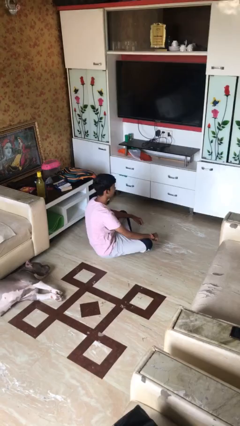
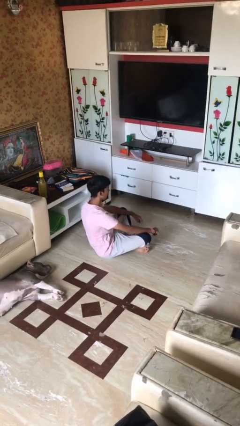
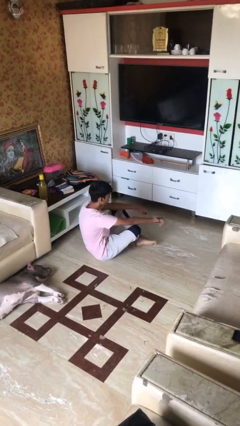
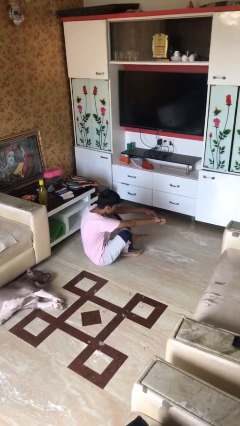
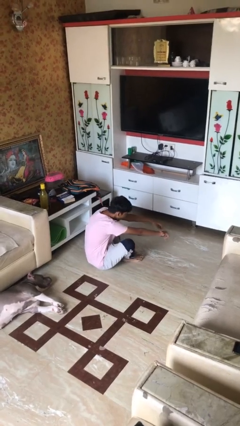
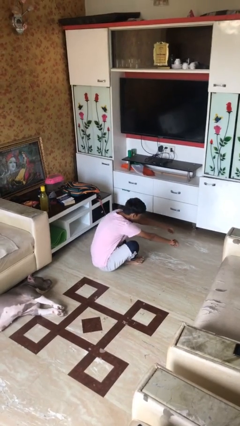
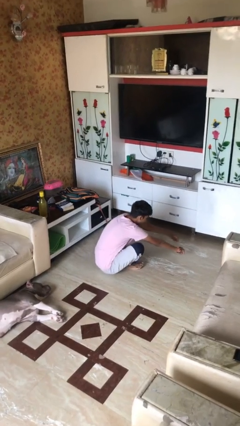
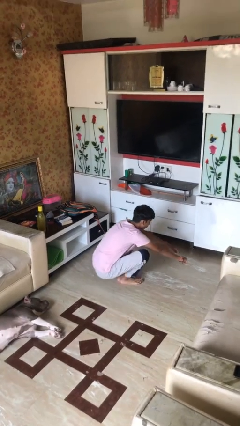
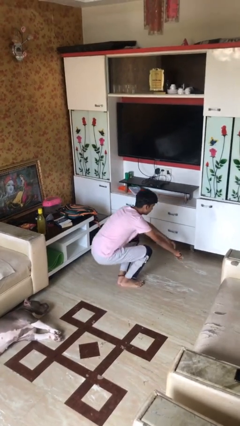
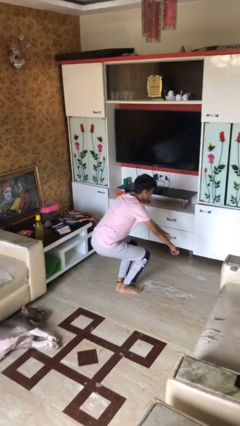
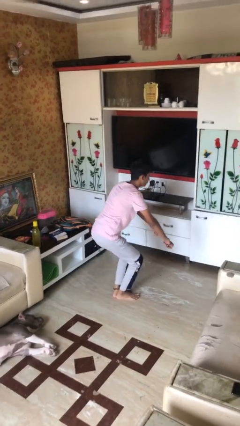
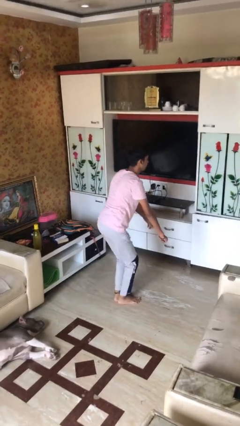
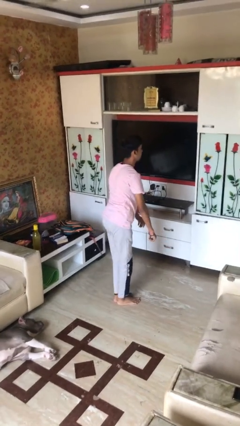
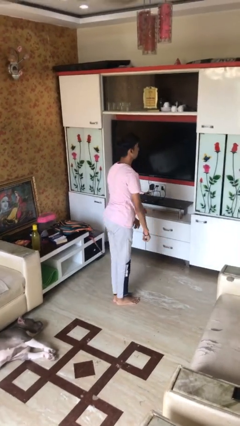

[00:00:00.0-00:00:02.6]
person stands up from floor

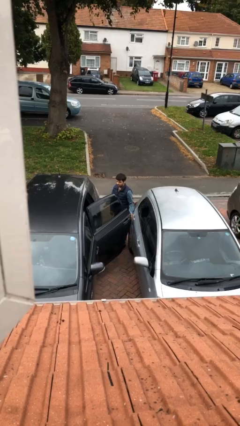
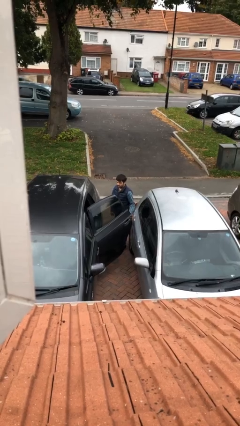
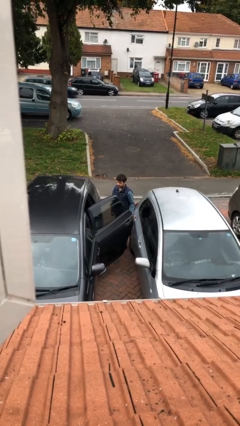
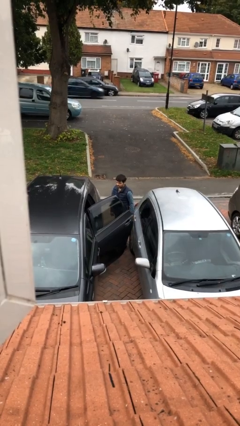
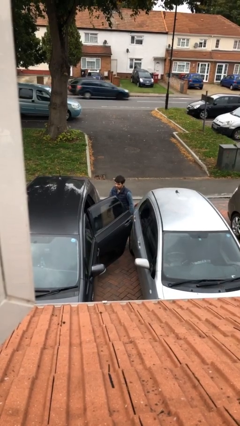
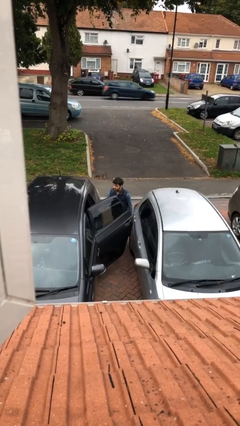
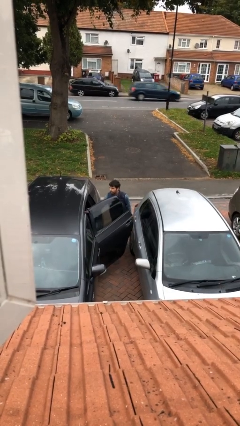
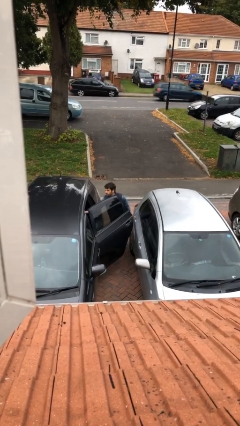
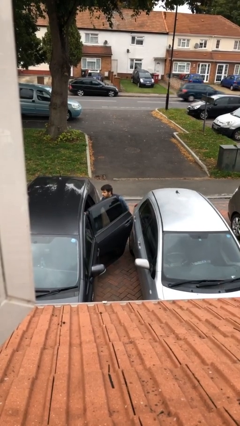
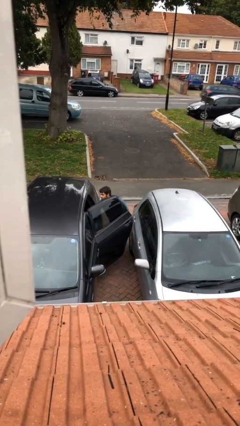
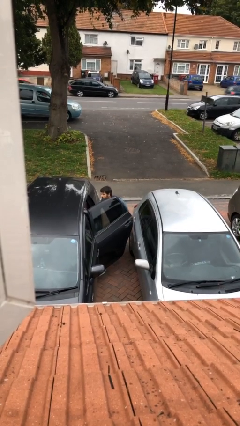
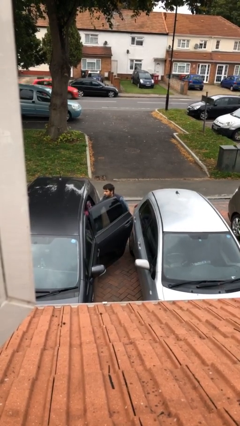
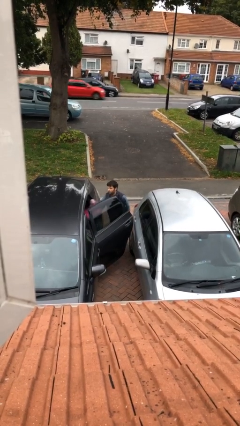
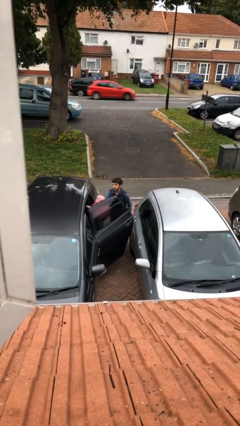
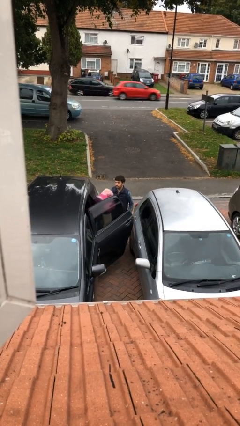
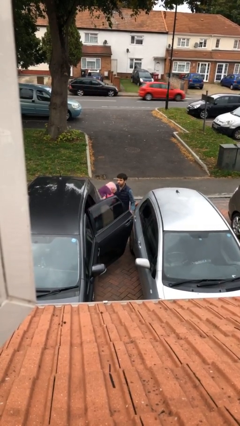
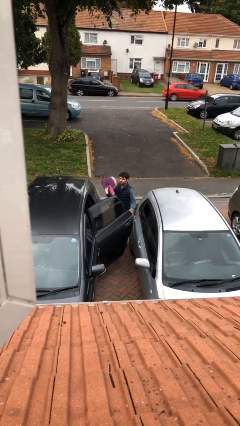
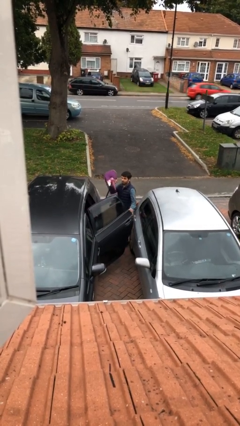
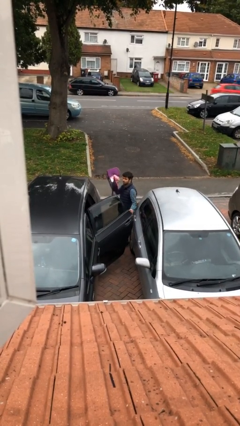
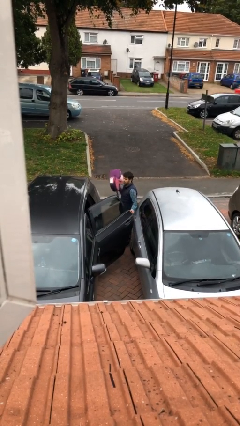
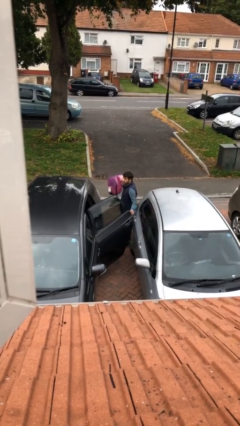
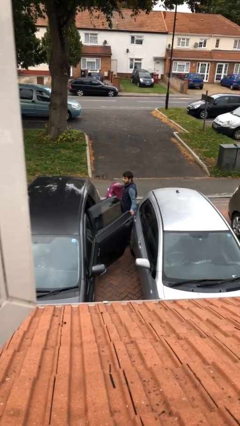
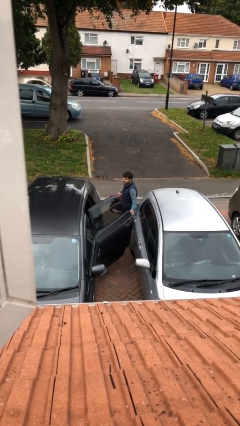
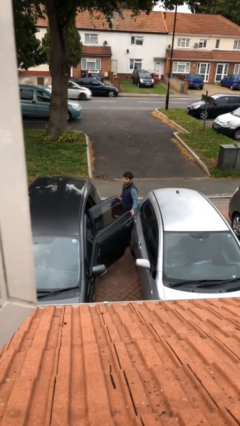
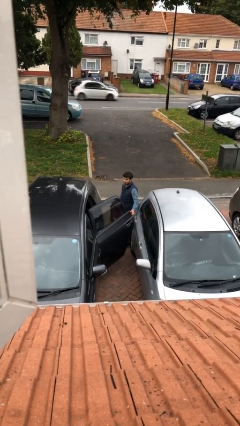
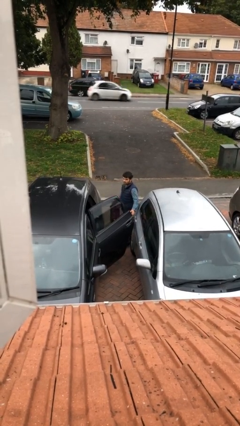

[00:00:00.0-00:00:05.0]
person unloads car

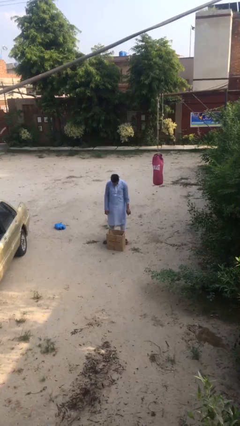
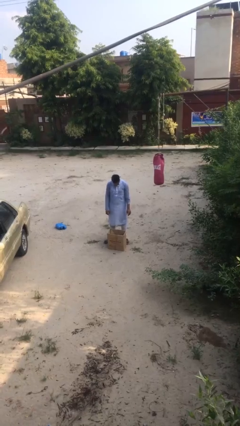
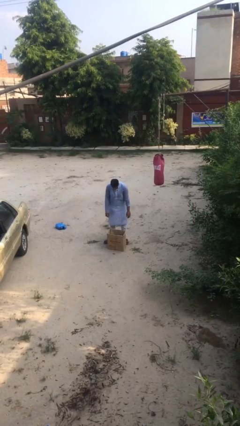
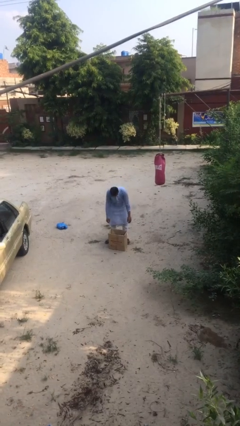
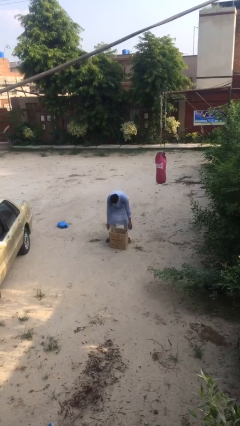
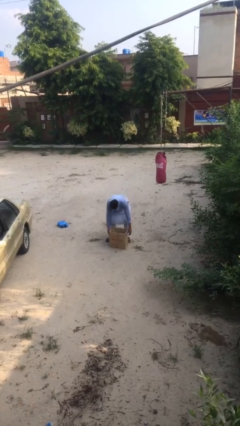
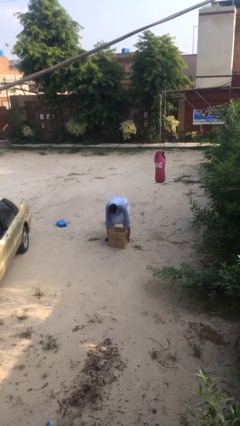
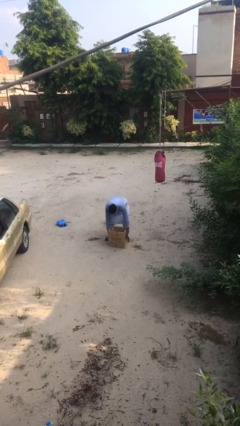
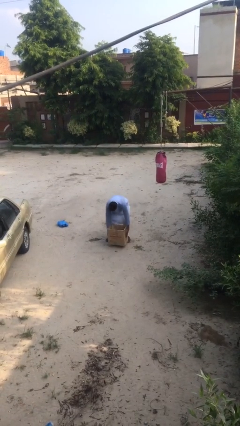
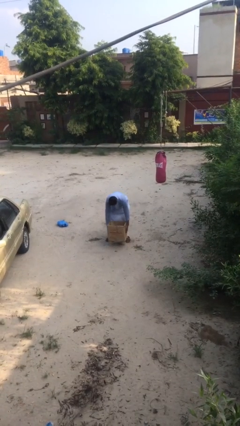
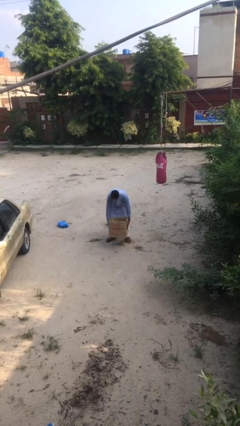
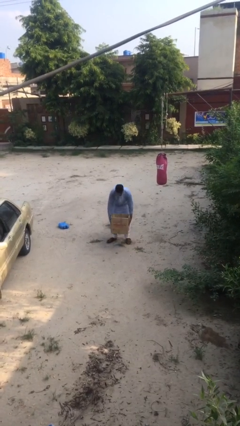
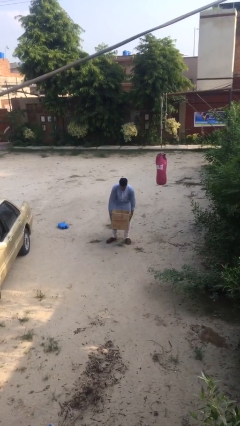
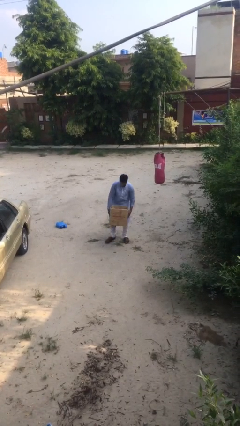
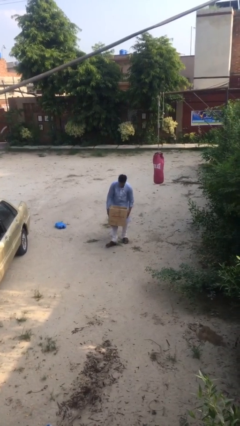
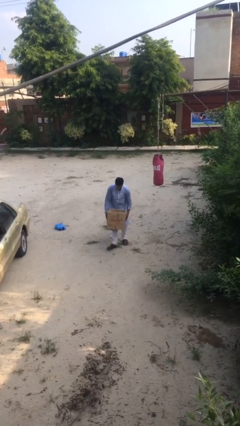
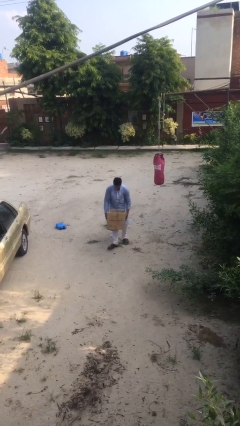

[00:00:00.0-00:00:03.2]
person picks up object from floor

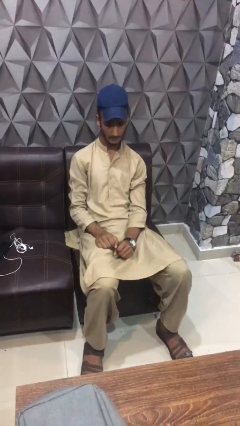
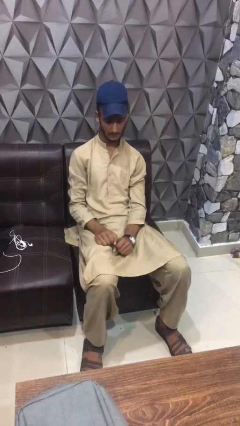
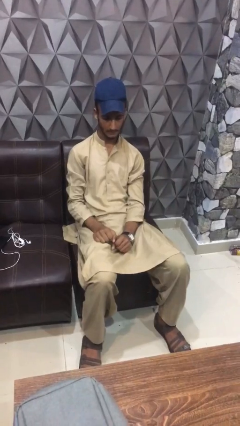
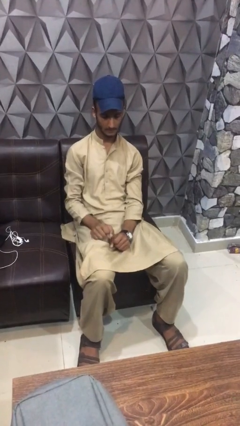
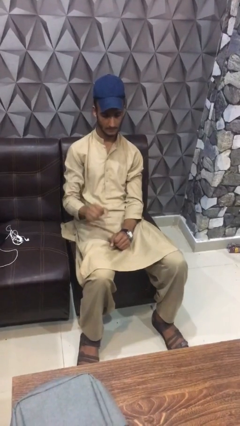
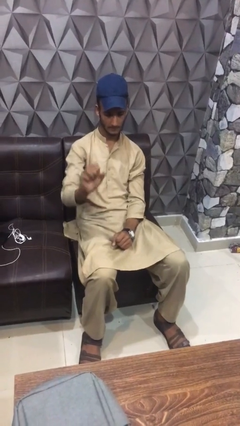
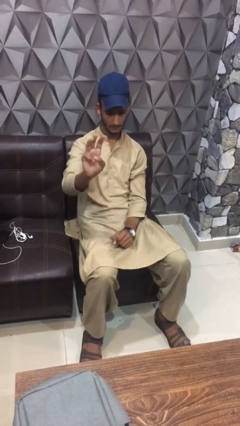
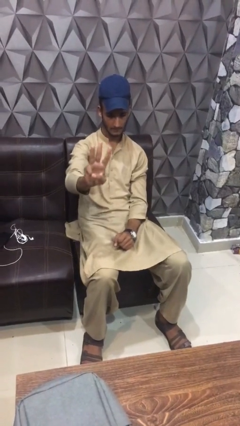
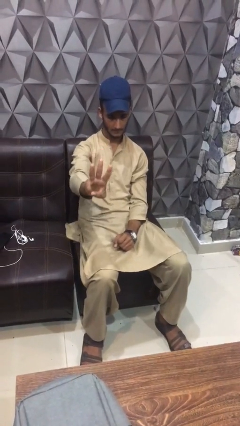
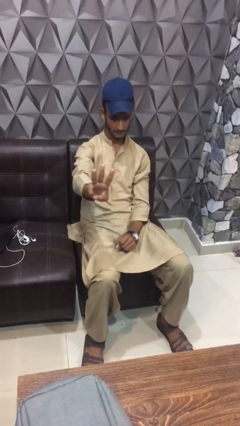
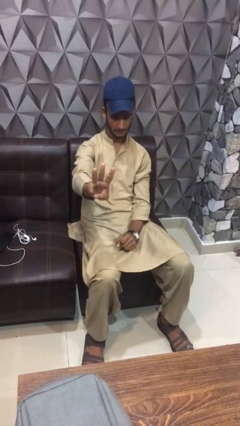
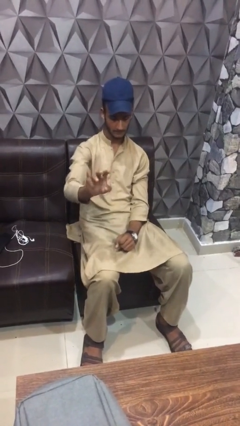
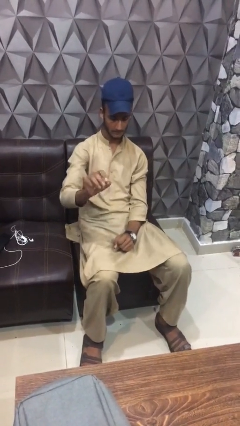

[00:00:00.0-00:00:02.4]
person gestures number three

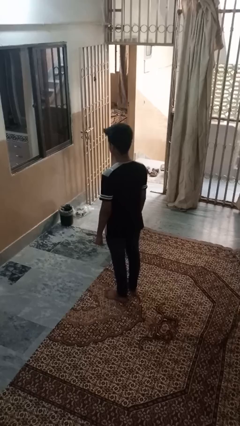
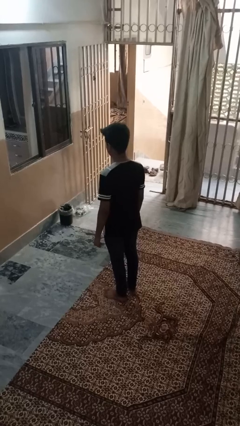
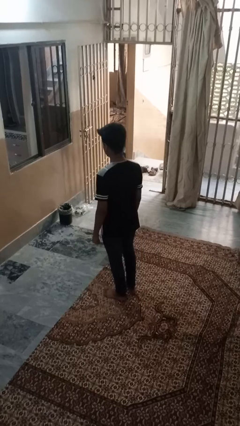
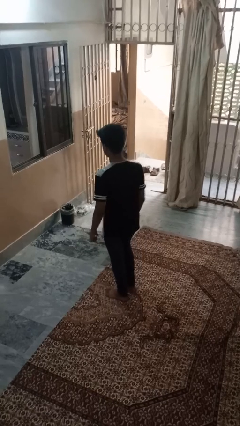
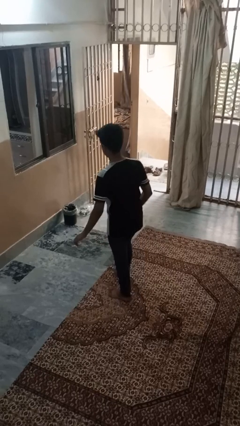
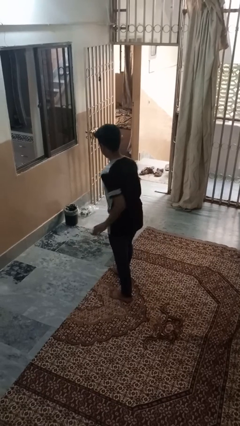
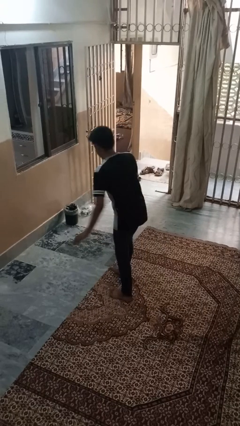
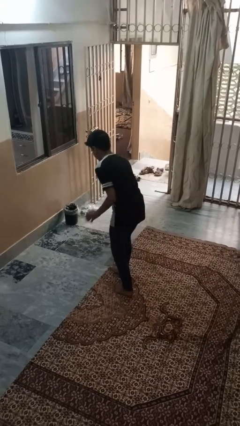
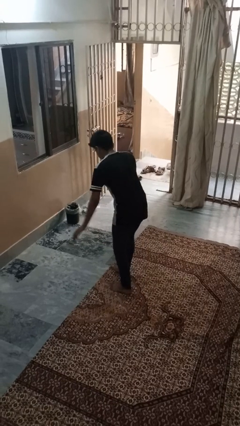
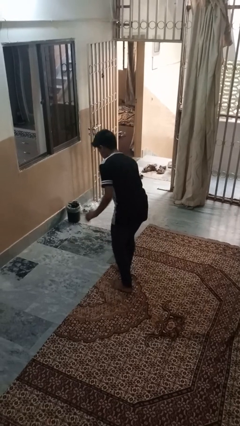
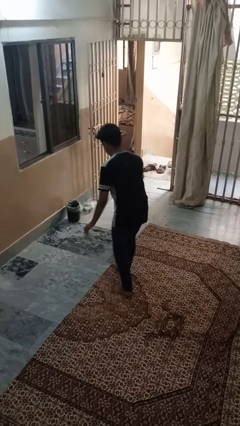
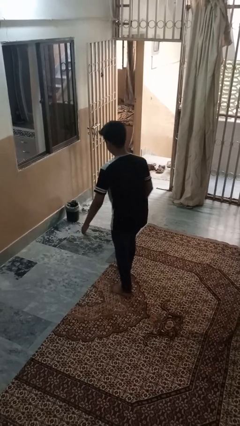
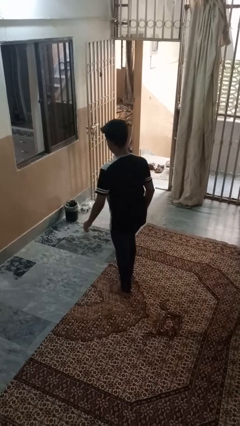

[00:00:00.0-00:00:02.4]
person dances in place

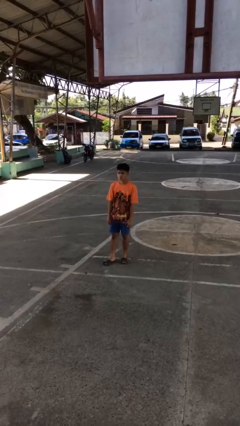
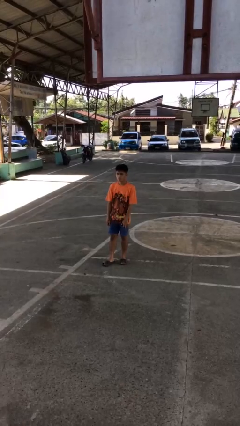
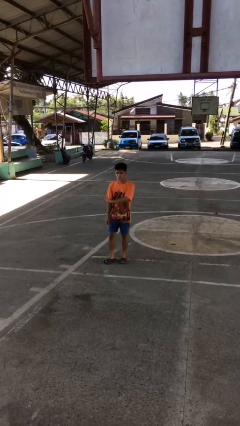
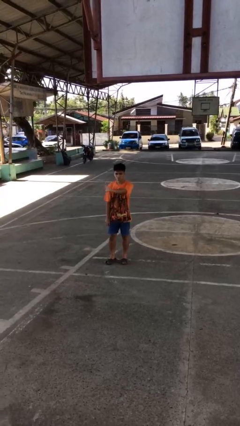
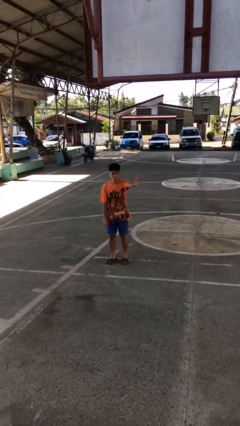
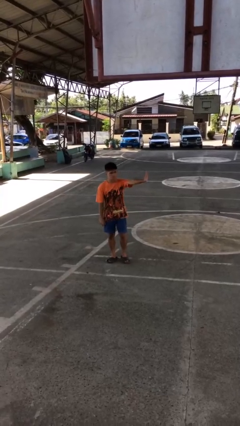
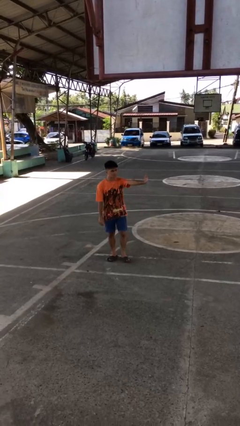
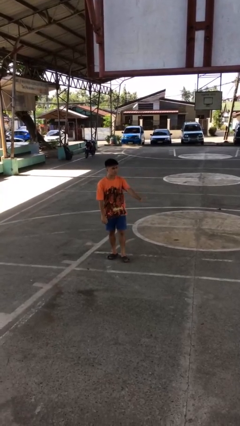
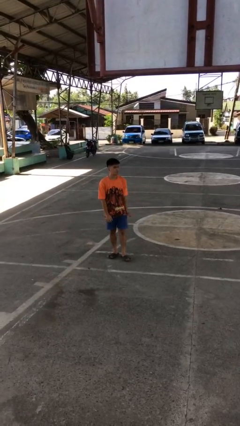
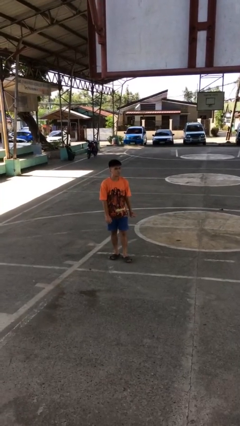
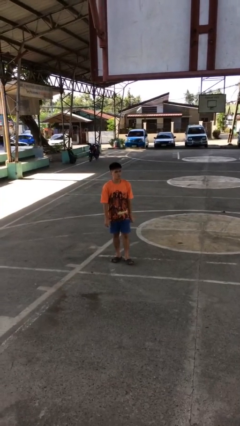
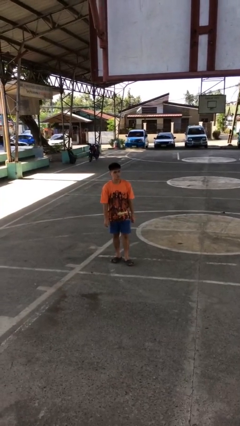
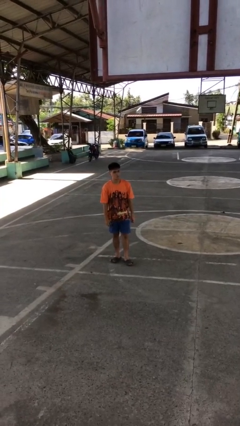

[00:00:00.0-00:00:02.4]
person gestures swipe left
